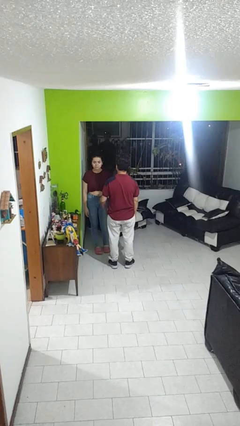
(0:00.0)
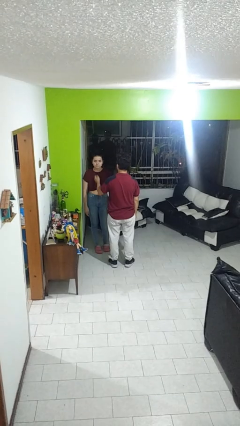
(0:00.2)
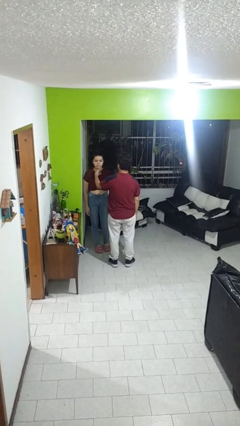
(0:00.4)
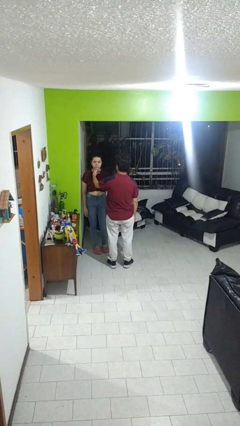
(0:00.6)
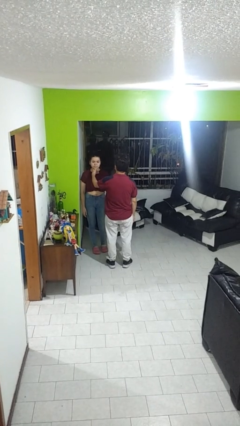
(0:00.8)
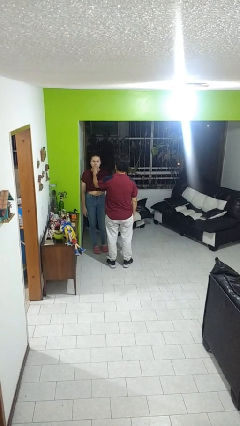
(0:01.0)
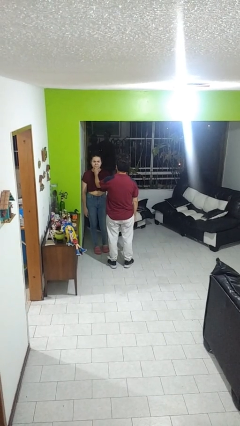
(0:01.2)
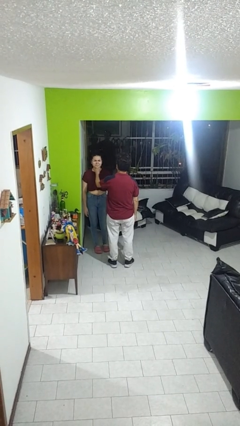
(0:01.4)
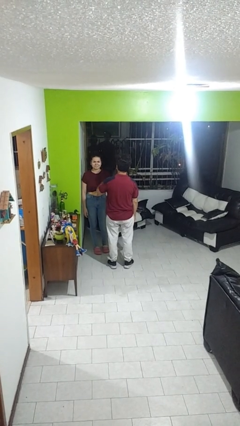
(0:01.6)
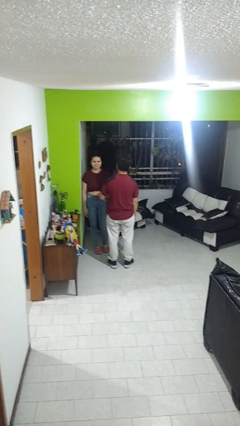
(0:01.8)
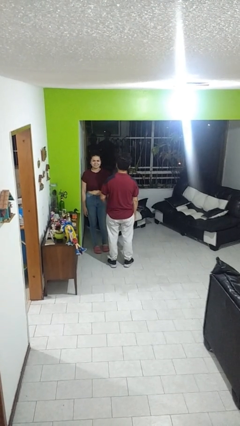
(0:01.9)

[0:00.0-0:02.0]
person touches face of person

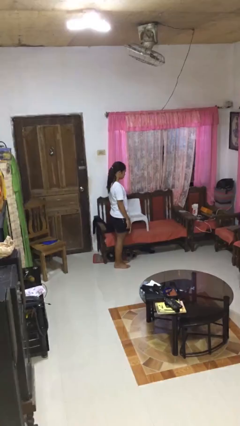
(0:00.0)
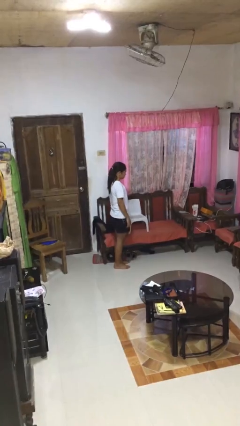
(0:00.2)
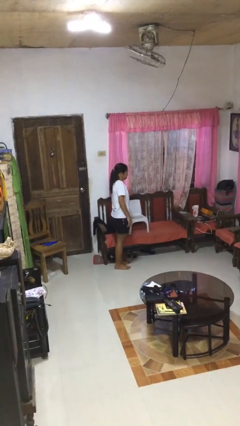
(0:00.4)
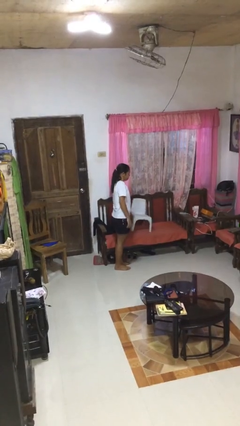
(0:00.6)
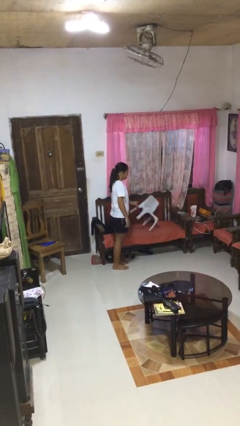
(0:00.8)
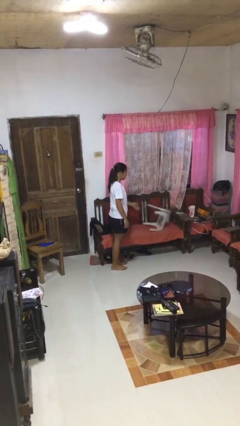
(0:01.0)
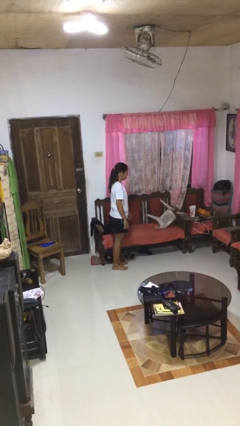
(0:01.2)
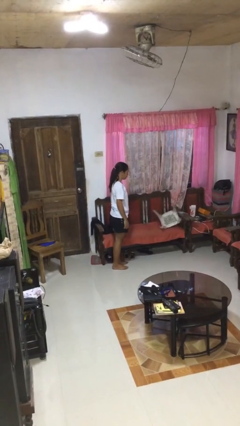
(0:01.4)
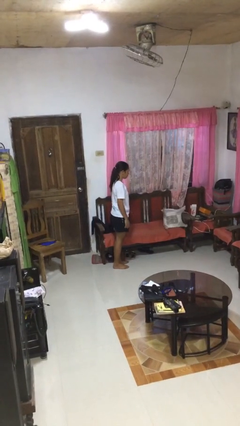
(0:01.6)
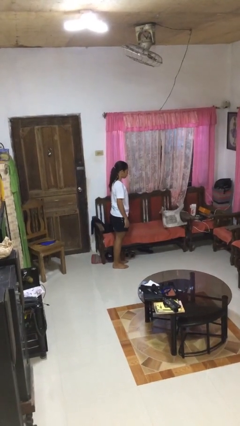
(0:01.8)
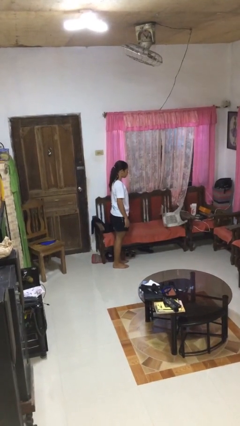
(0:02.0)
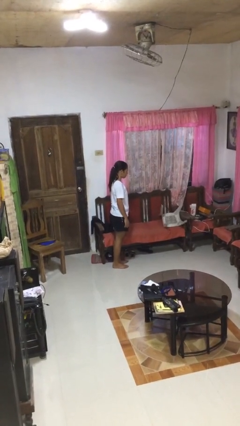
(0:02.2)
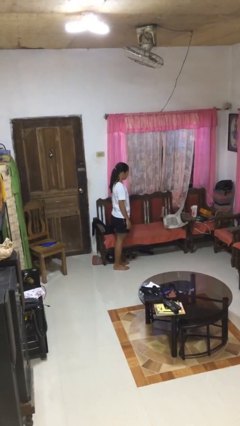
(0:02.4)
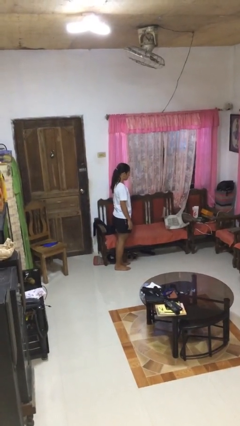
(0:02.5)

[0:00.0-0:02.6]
person knocks over furniture

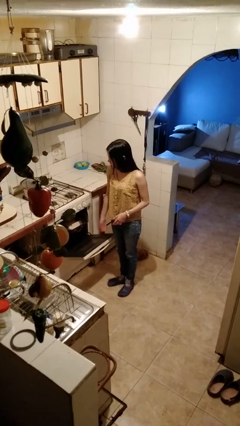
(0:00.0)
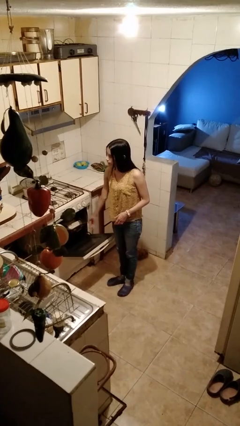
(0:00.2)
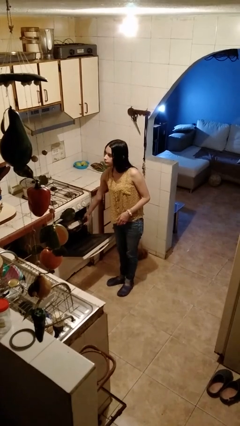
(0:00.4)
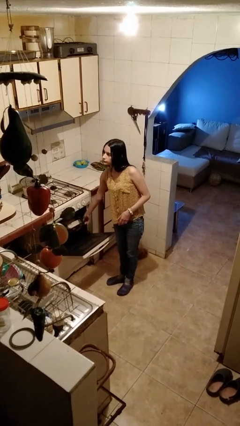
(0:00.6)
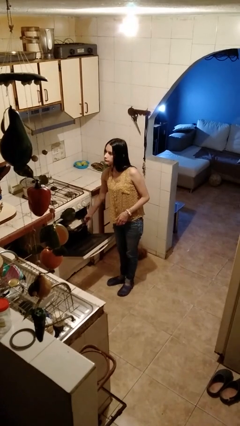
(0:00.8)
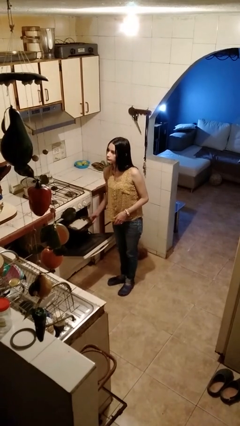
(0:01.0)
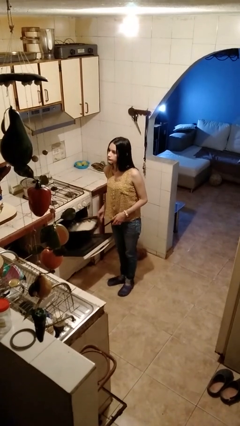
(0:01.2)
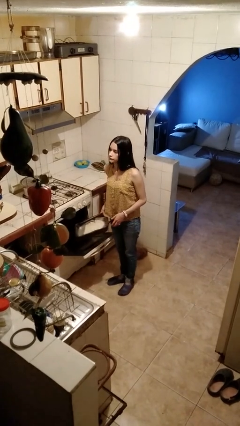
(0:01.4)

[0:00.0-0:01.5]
person takes object from oven

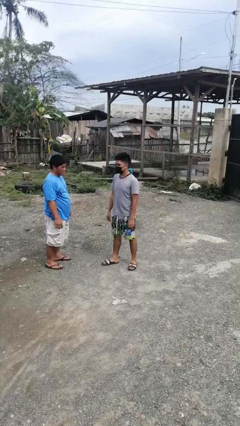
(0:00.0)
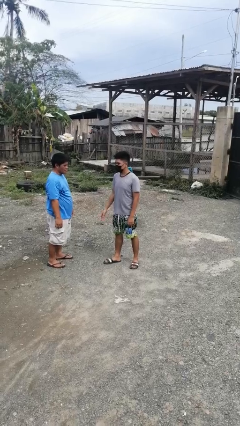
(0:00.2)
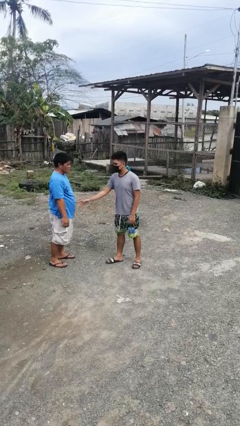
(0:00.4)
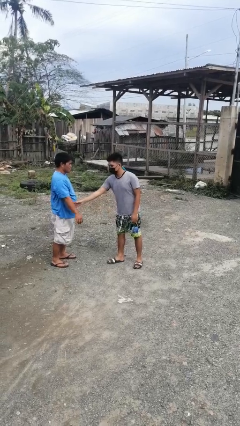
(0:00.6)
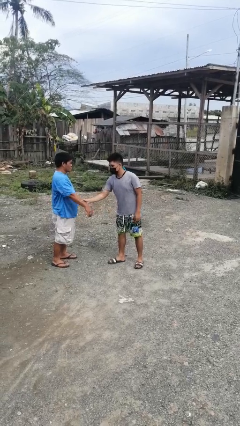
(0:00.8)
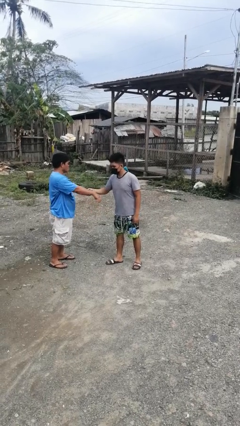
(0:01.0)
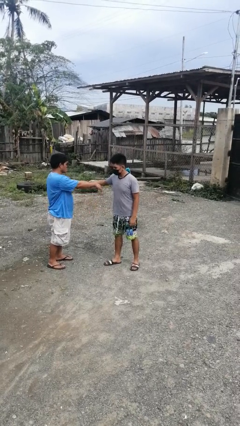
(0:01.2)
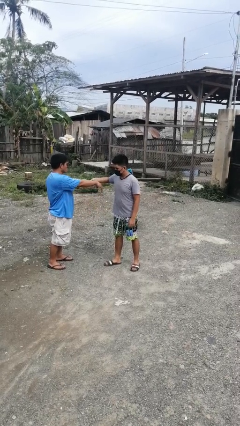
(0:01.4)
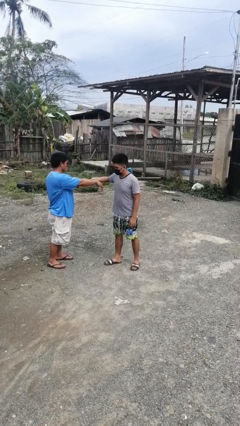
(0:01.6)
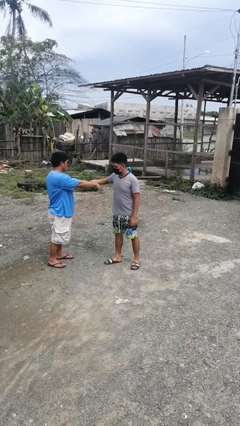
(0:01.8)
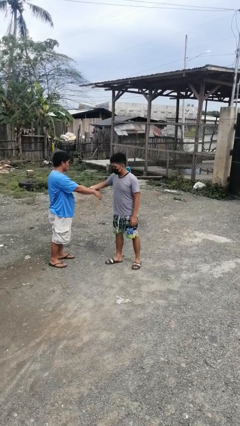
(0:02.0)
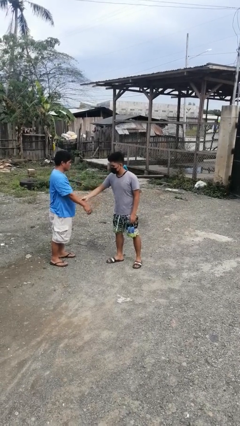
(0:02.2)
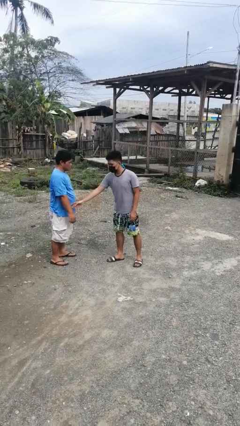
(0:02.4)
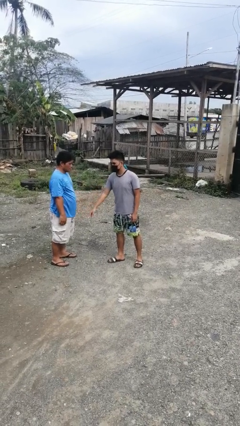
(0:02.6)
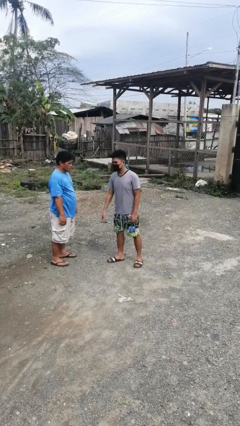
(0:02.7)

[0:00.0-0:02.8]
person grabs person by forearm

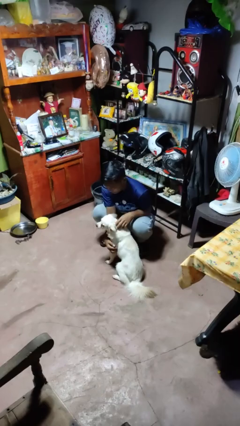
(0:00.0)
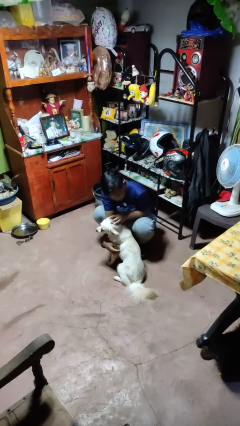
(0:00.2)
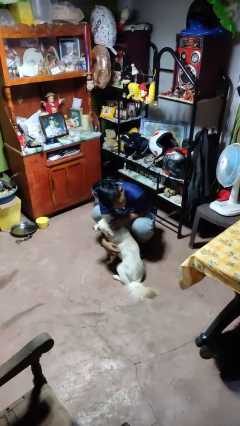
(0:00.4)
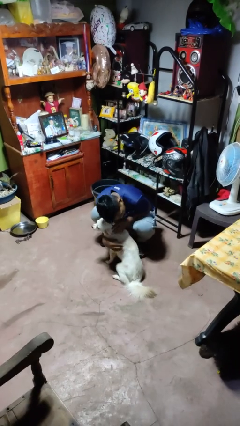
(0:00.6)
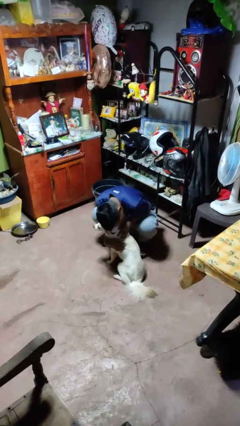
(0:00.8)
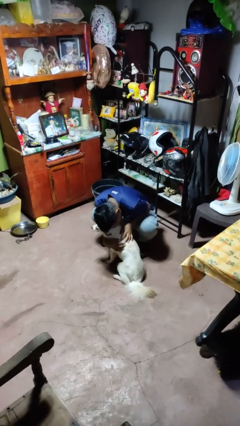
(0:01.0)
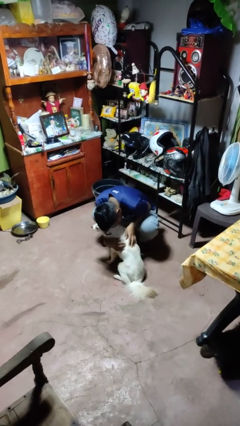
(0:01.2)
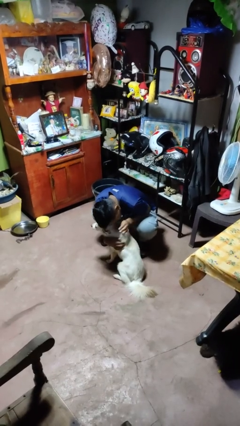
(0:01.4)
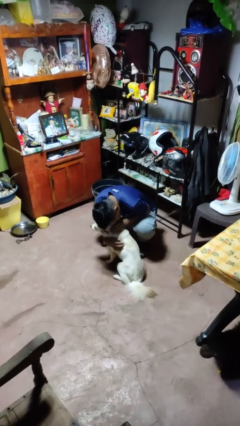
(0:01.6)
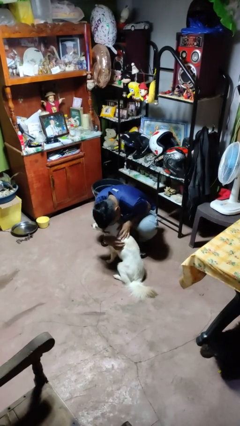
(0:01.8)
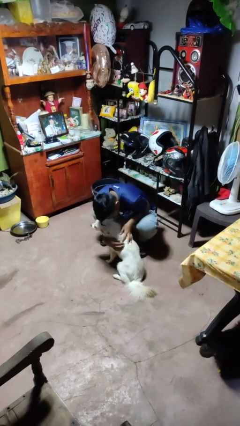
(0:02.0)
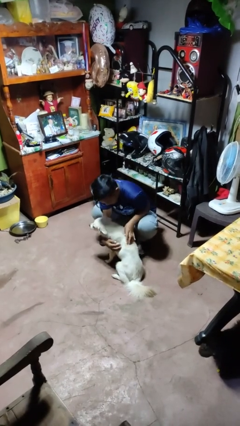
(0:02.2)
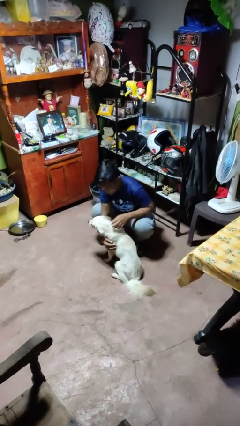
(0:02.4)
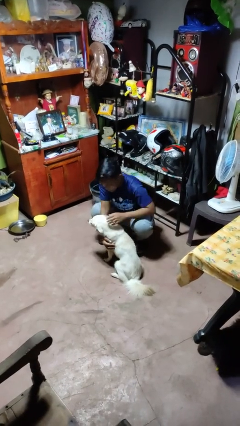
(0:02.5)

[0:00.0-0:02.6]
person hugs dog

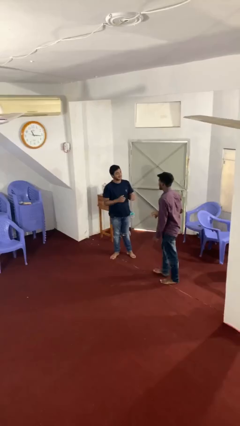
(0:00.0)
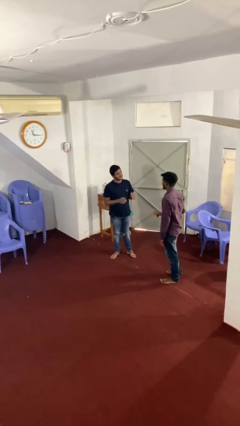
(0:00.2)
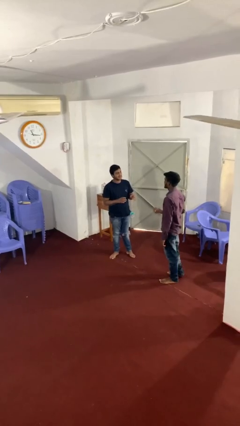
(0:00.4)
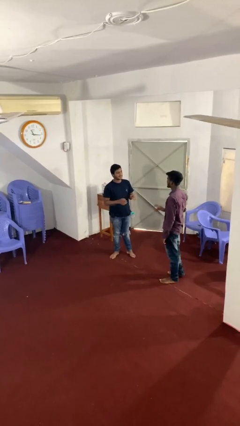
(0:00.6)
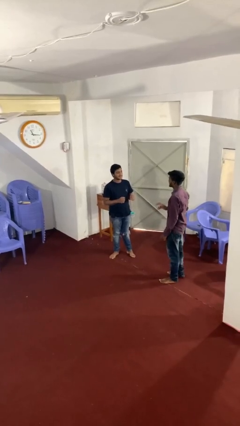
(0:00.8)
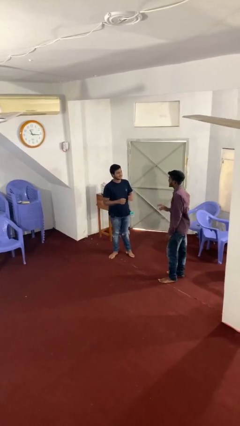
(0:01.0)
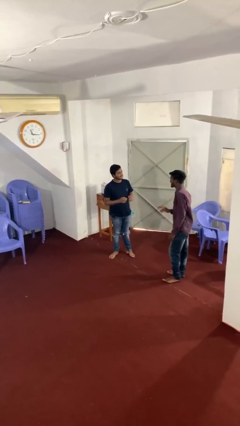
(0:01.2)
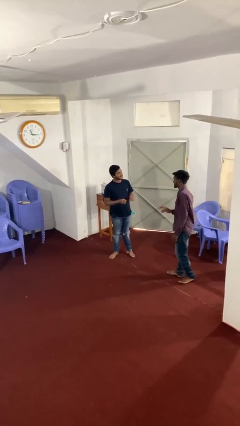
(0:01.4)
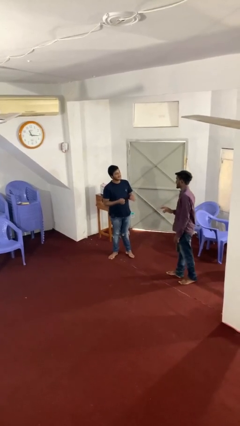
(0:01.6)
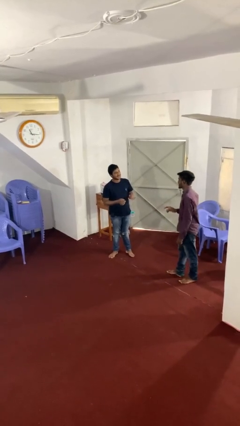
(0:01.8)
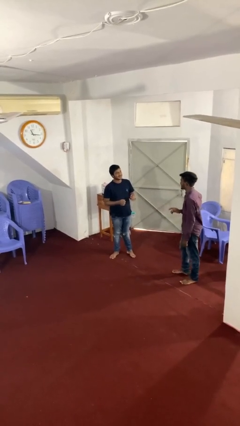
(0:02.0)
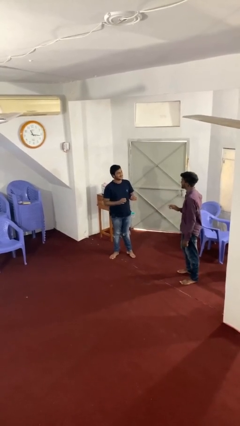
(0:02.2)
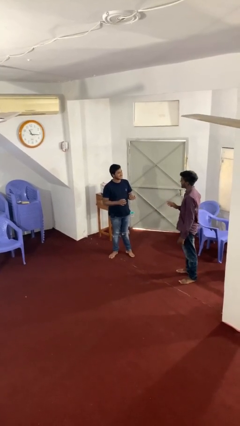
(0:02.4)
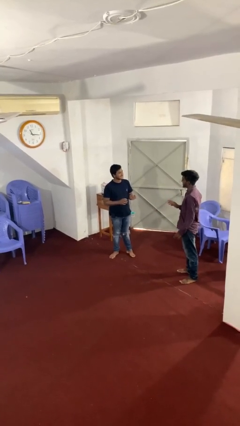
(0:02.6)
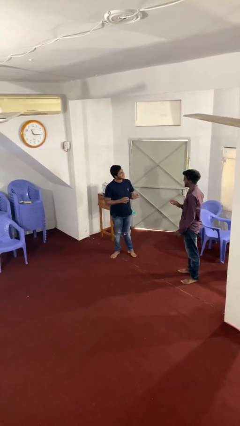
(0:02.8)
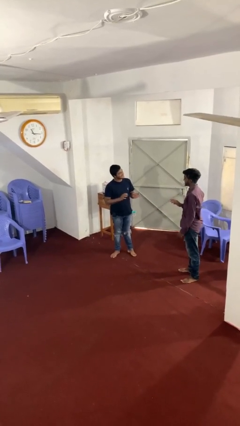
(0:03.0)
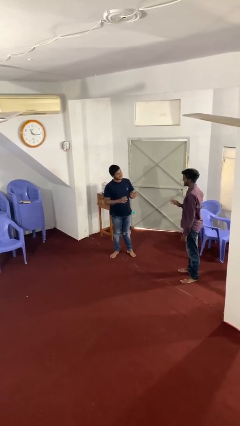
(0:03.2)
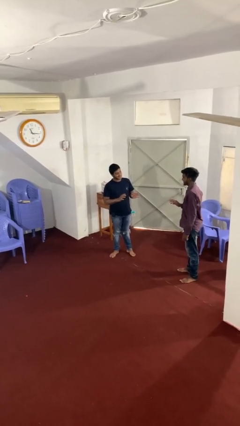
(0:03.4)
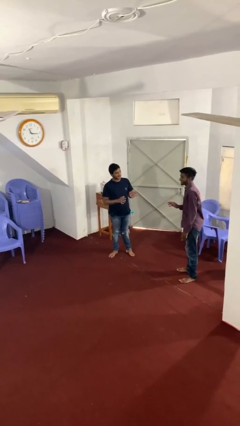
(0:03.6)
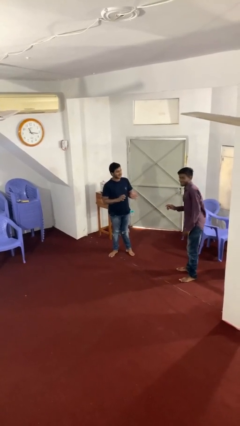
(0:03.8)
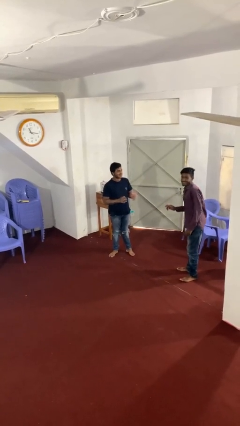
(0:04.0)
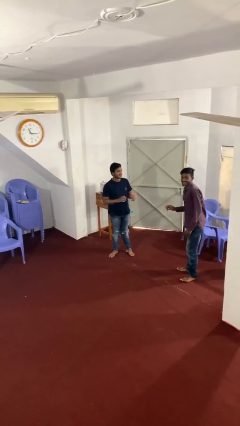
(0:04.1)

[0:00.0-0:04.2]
person talks to person

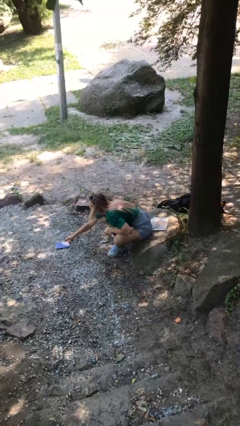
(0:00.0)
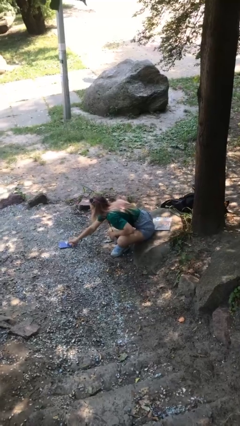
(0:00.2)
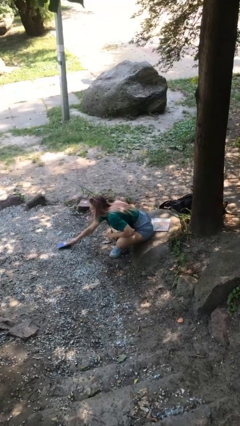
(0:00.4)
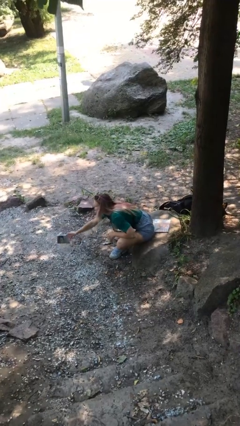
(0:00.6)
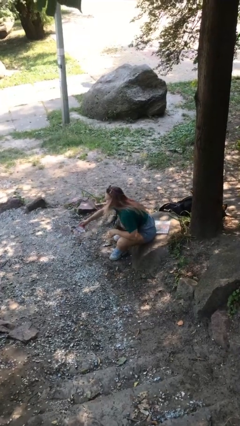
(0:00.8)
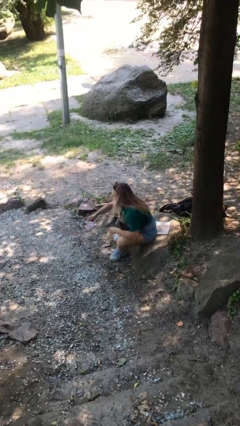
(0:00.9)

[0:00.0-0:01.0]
person picks up object from floor

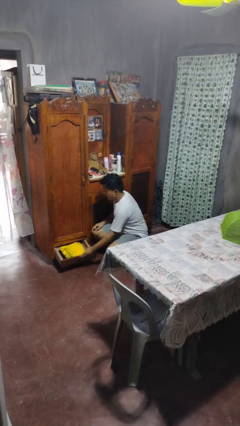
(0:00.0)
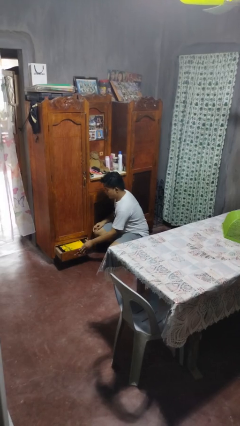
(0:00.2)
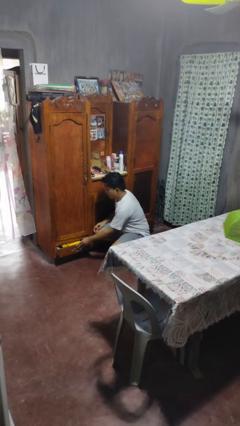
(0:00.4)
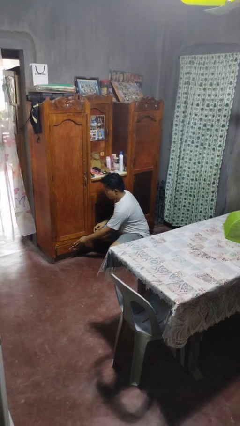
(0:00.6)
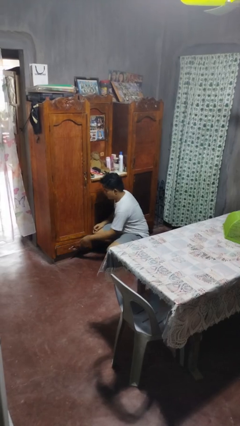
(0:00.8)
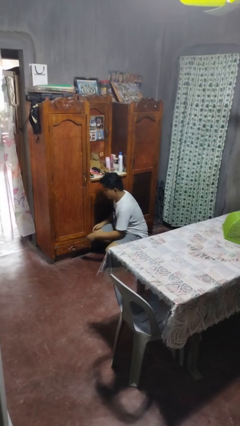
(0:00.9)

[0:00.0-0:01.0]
person closes dresser drawer
